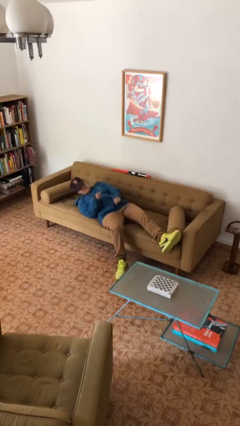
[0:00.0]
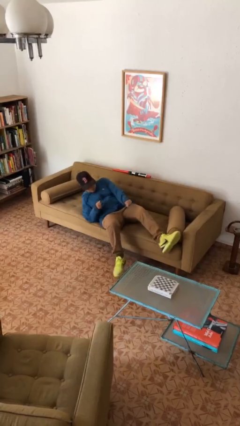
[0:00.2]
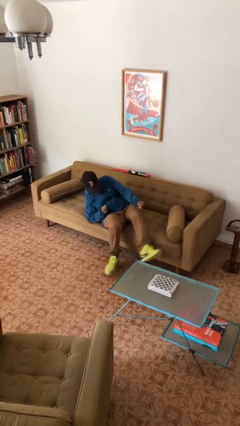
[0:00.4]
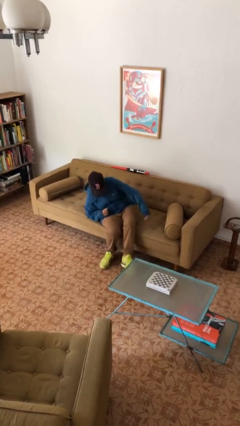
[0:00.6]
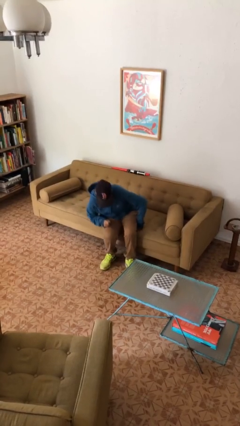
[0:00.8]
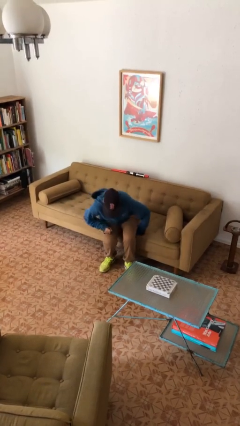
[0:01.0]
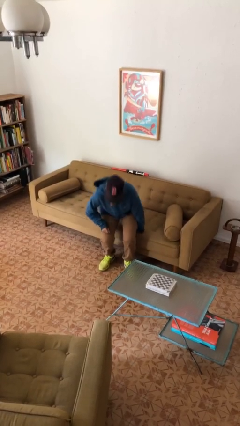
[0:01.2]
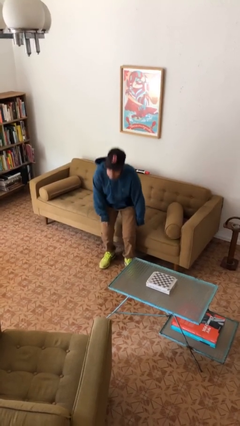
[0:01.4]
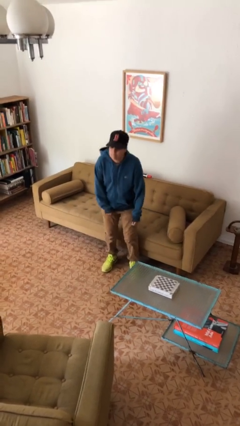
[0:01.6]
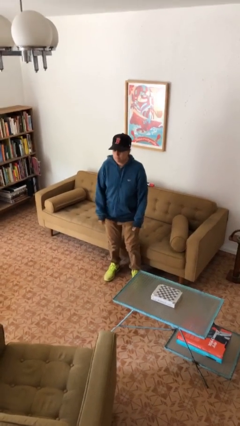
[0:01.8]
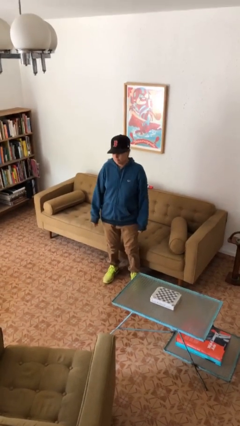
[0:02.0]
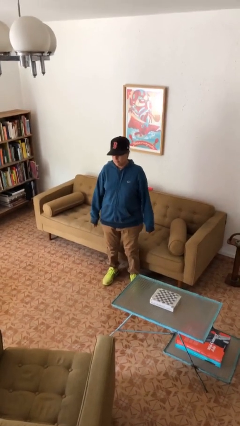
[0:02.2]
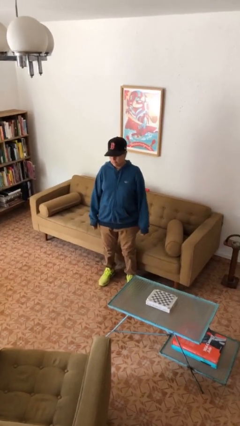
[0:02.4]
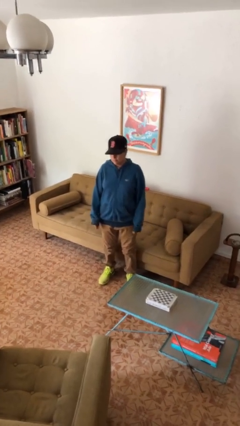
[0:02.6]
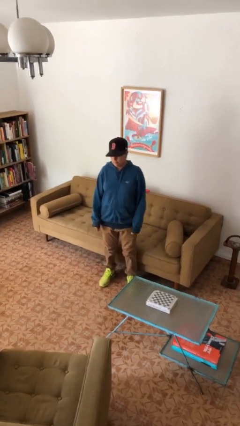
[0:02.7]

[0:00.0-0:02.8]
person stands up

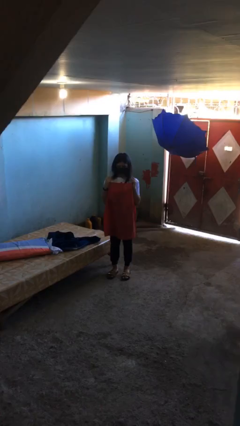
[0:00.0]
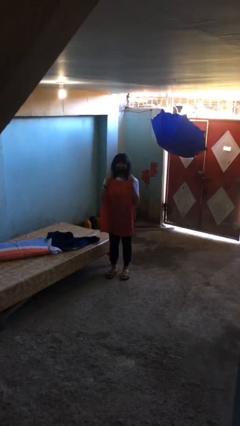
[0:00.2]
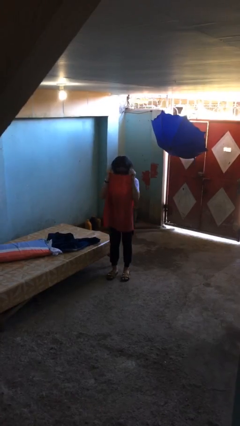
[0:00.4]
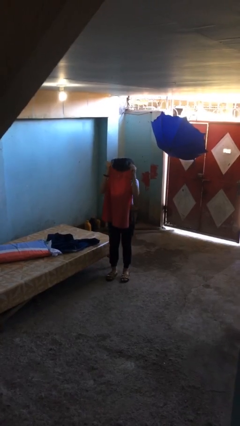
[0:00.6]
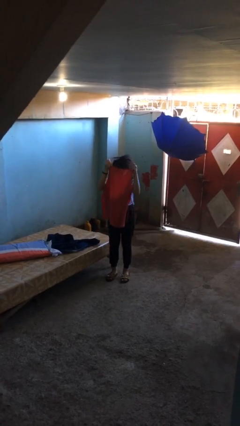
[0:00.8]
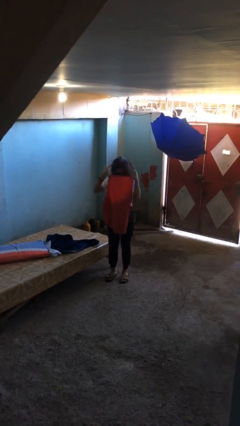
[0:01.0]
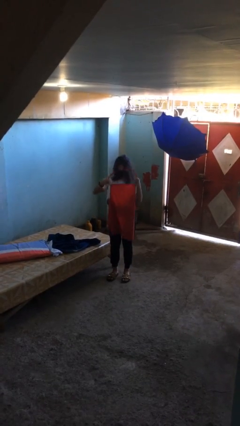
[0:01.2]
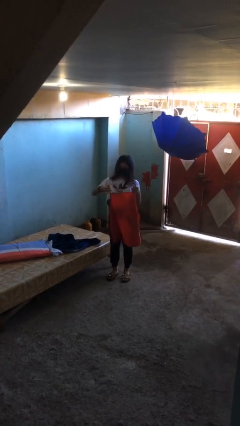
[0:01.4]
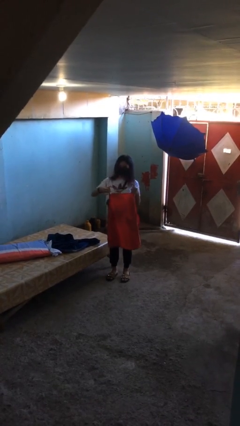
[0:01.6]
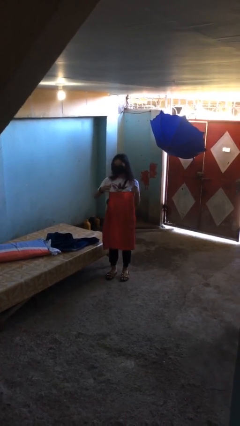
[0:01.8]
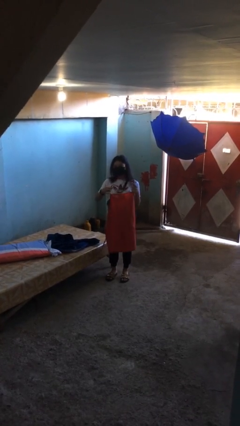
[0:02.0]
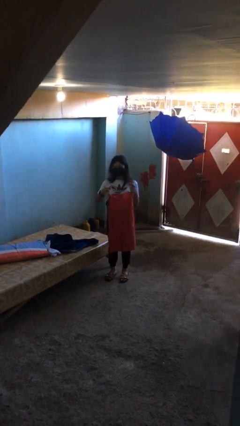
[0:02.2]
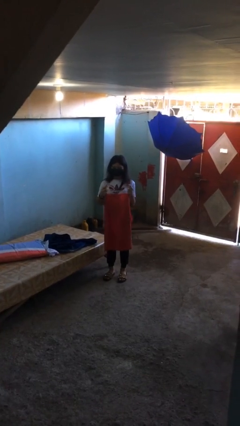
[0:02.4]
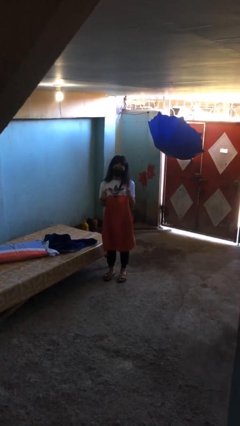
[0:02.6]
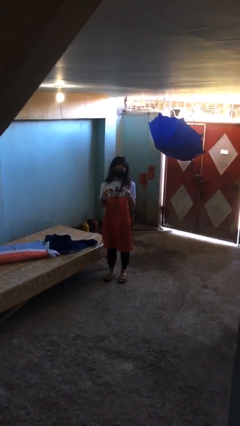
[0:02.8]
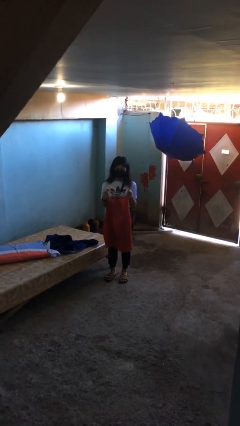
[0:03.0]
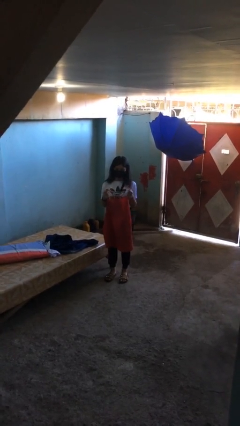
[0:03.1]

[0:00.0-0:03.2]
person takes off apron

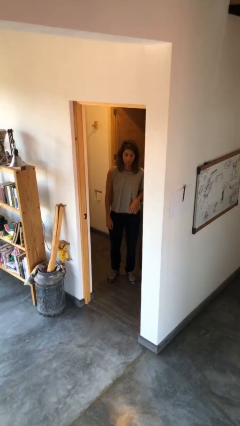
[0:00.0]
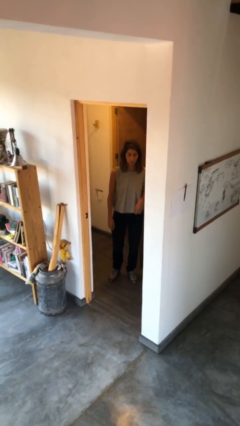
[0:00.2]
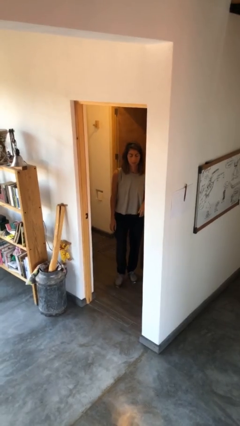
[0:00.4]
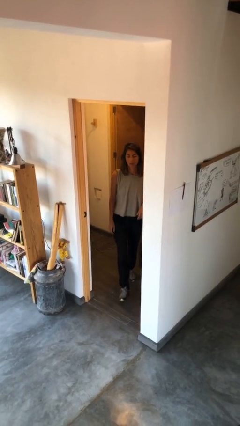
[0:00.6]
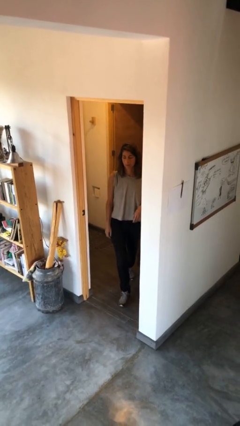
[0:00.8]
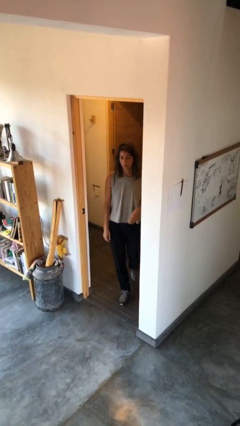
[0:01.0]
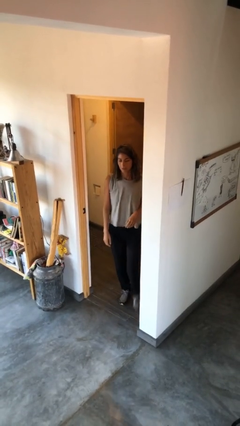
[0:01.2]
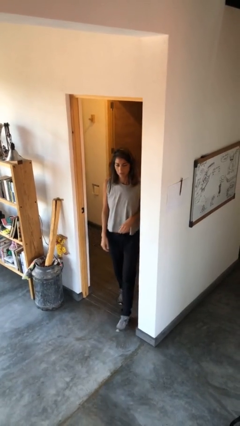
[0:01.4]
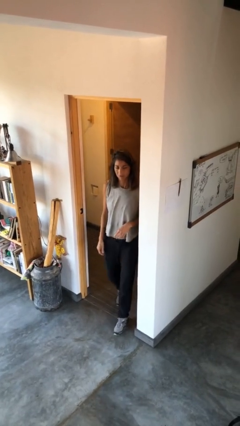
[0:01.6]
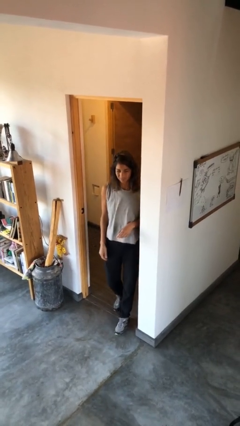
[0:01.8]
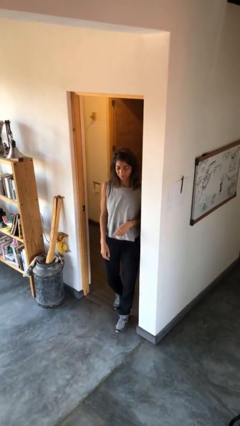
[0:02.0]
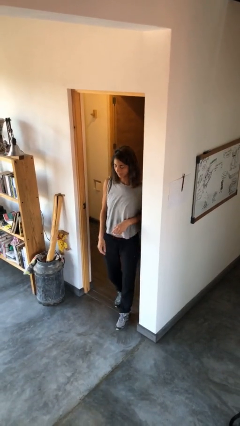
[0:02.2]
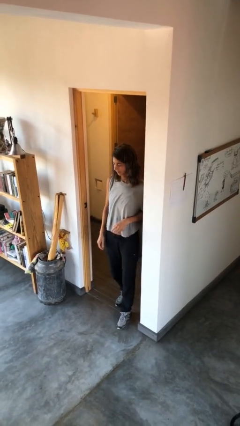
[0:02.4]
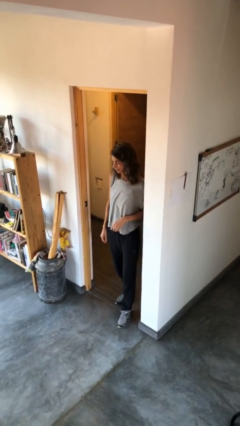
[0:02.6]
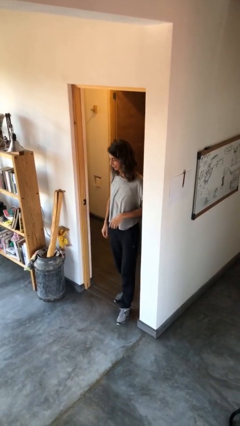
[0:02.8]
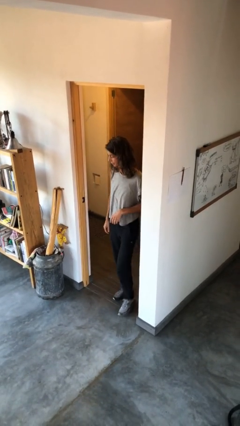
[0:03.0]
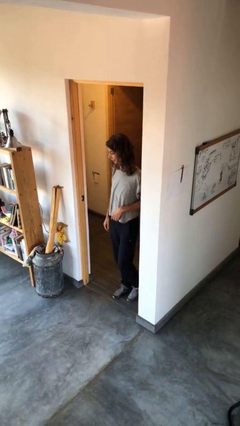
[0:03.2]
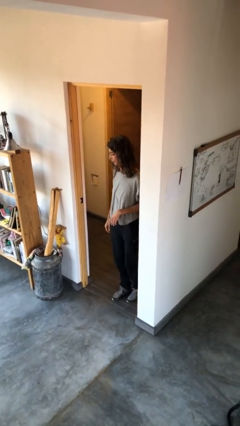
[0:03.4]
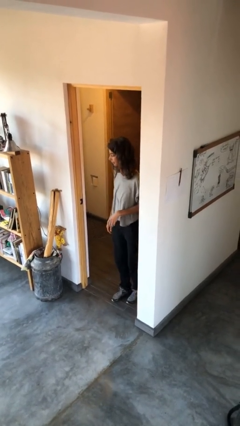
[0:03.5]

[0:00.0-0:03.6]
person bumps into wall

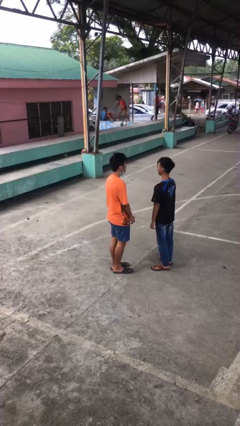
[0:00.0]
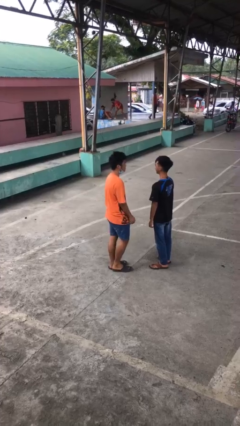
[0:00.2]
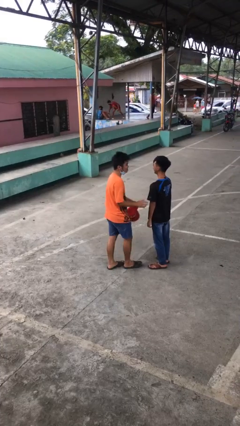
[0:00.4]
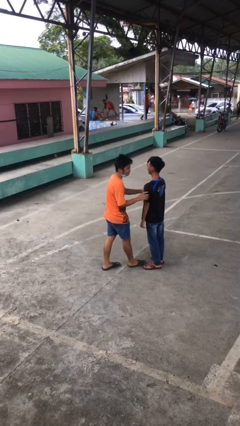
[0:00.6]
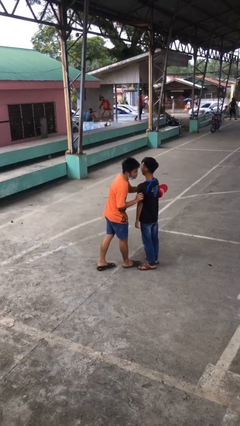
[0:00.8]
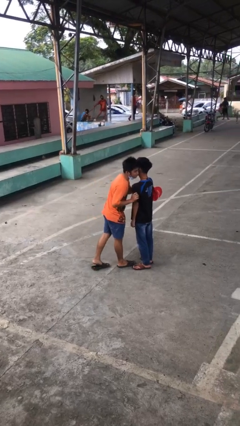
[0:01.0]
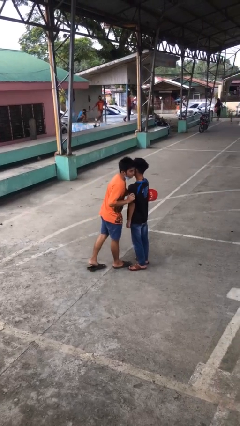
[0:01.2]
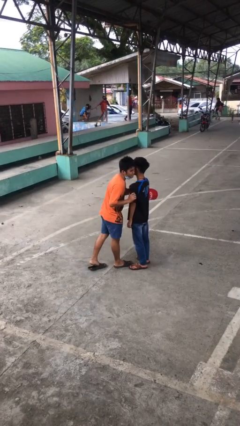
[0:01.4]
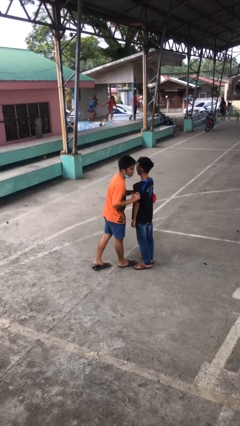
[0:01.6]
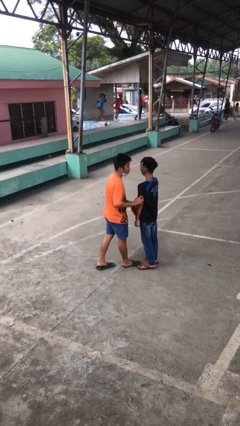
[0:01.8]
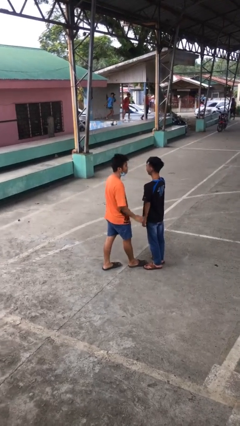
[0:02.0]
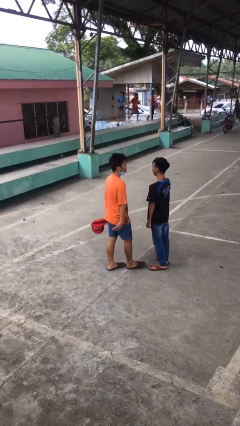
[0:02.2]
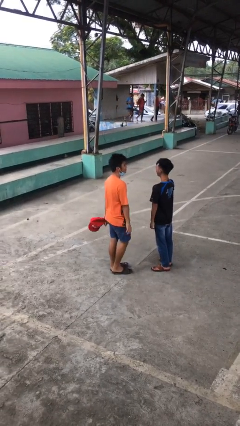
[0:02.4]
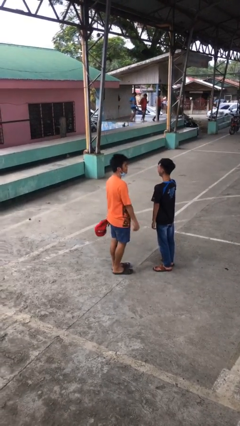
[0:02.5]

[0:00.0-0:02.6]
person kisses cheek of person

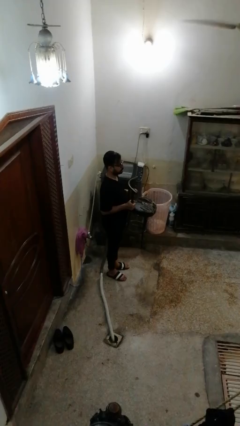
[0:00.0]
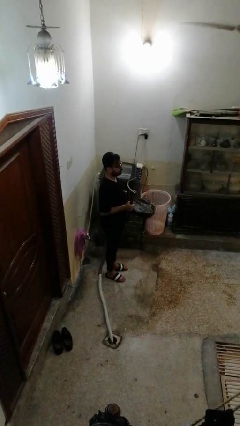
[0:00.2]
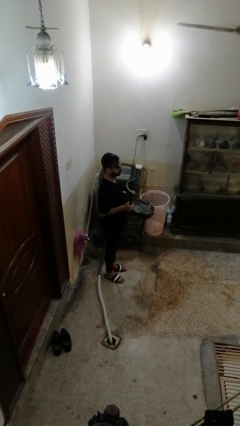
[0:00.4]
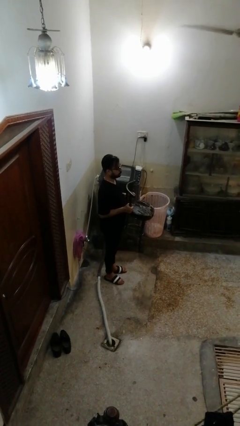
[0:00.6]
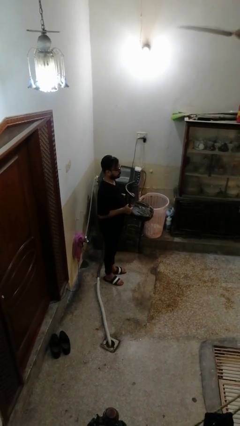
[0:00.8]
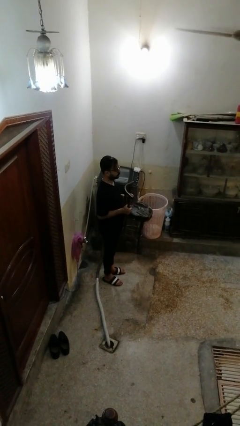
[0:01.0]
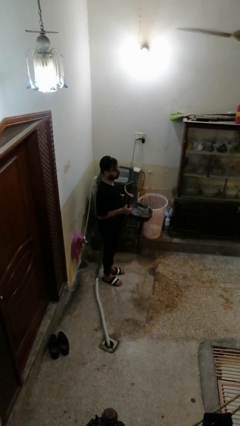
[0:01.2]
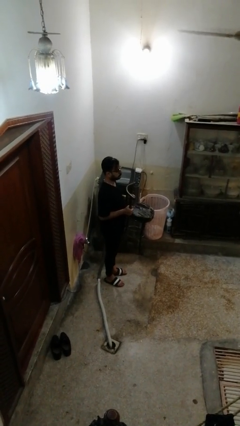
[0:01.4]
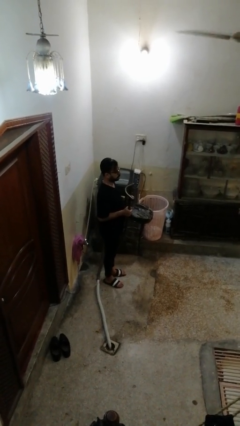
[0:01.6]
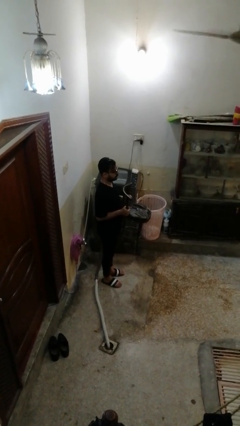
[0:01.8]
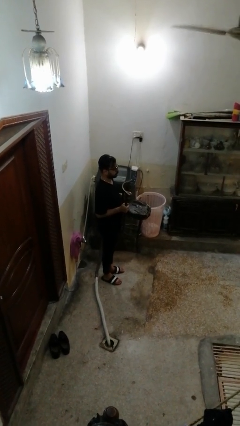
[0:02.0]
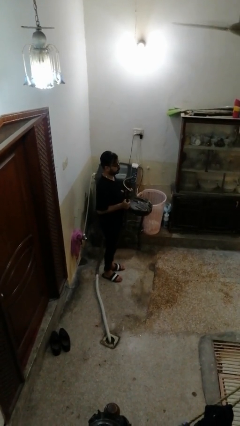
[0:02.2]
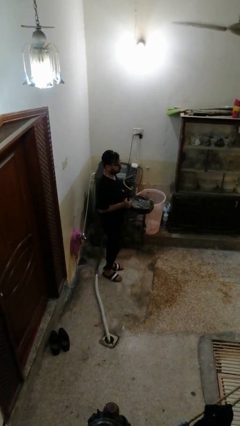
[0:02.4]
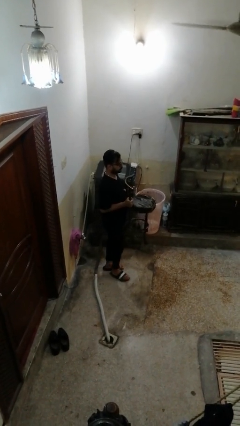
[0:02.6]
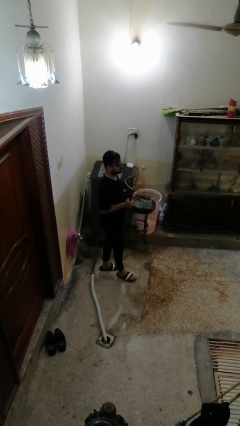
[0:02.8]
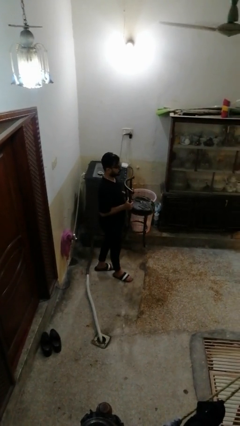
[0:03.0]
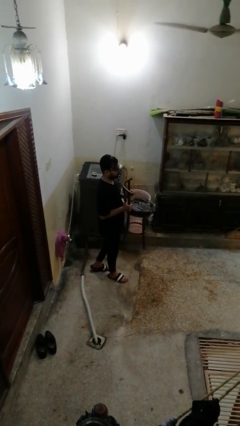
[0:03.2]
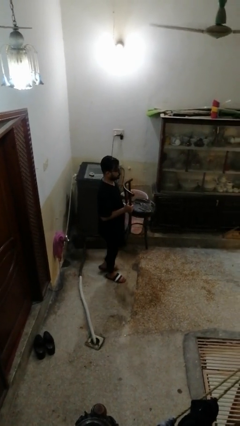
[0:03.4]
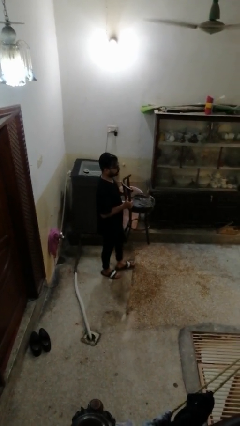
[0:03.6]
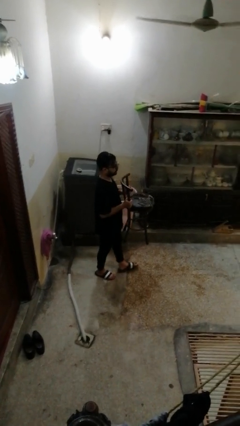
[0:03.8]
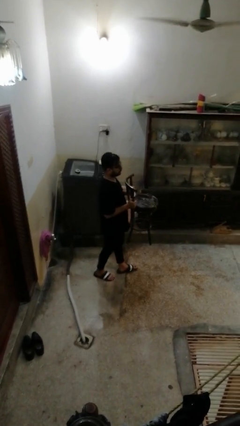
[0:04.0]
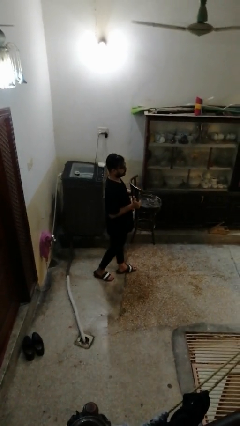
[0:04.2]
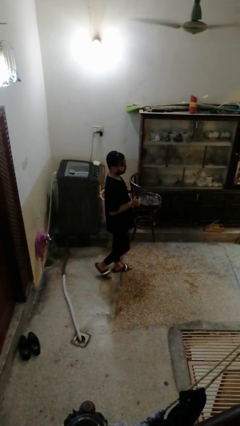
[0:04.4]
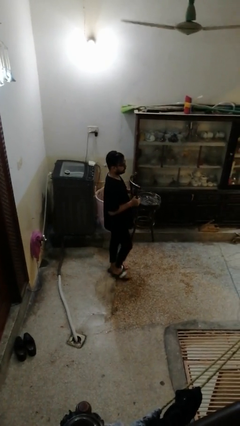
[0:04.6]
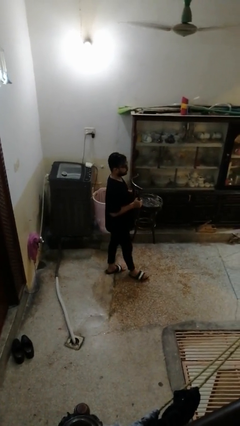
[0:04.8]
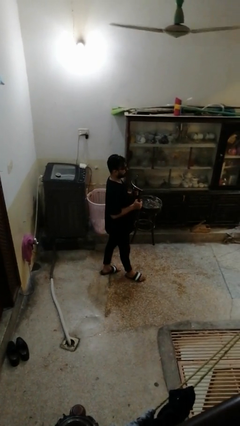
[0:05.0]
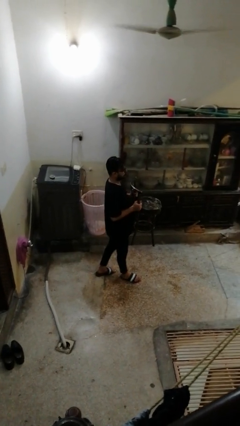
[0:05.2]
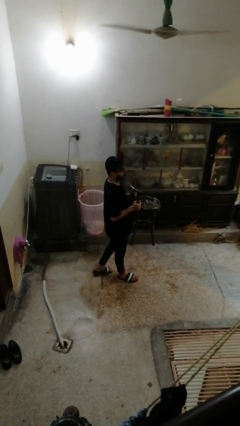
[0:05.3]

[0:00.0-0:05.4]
person carries furniture
